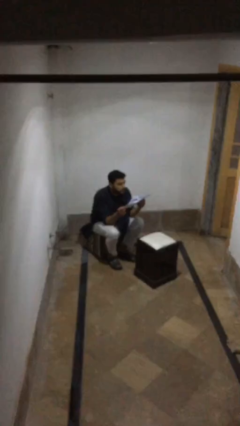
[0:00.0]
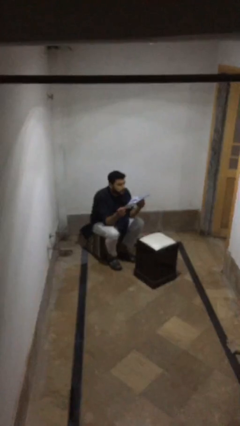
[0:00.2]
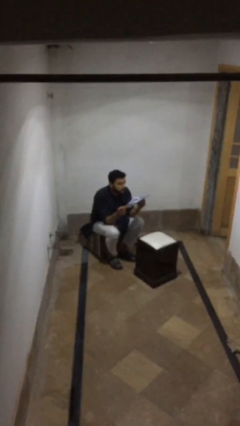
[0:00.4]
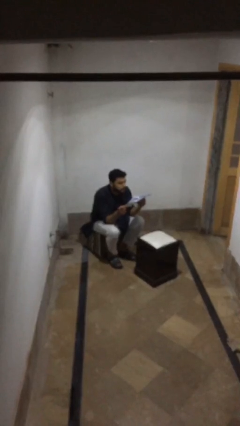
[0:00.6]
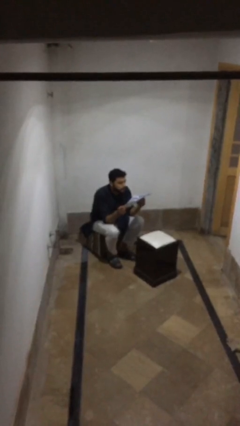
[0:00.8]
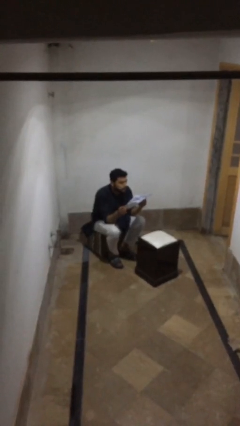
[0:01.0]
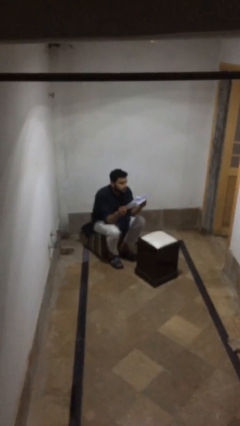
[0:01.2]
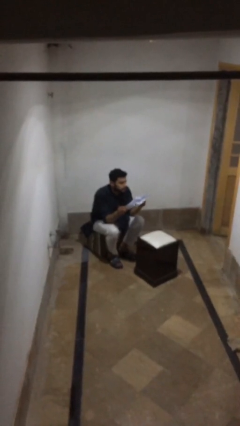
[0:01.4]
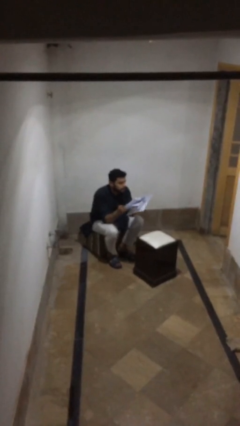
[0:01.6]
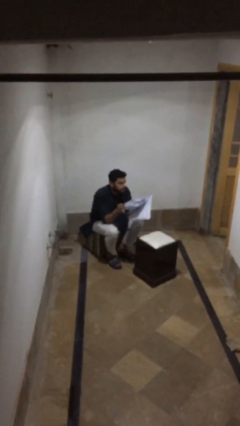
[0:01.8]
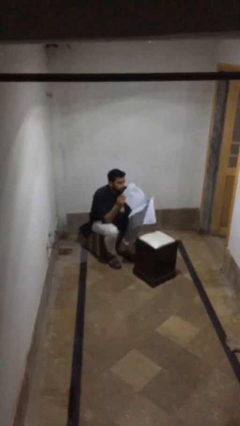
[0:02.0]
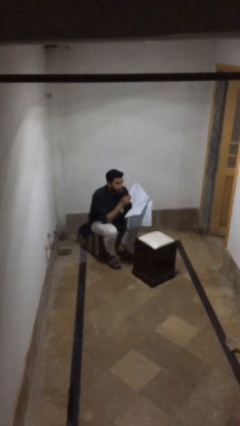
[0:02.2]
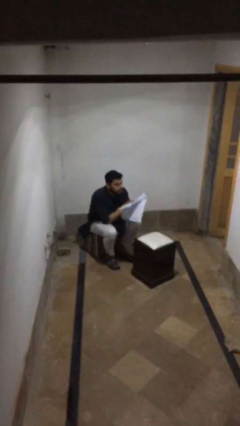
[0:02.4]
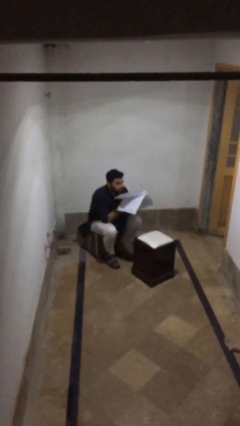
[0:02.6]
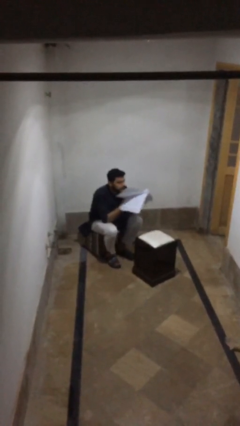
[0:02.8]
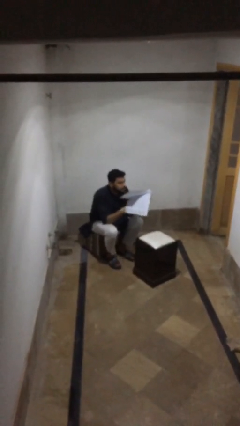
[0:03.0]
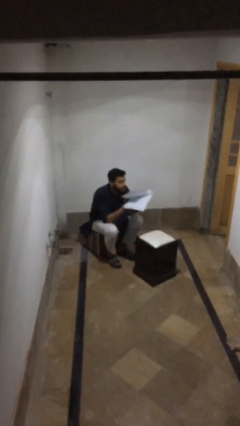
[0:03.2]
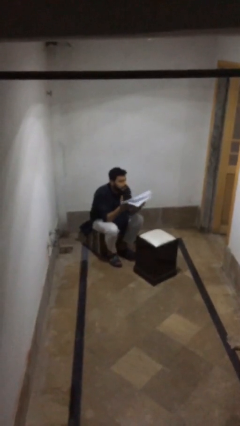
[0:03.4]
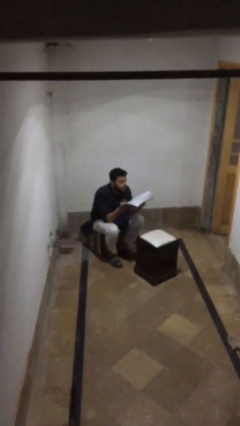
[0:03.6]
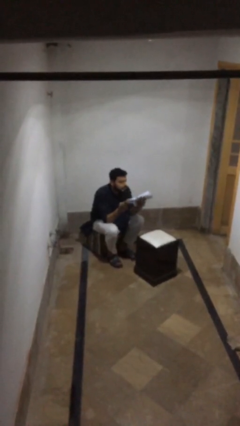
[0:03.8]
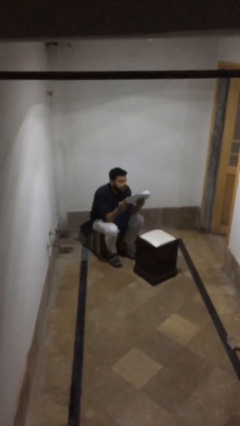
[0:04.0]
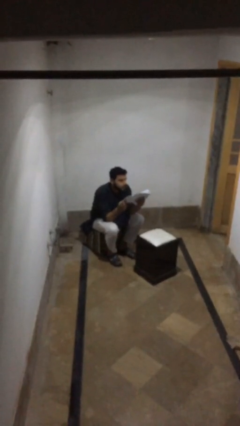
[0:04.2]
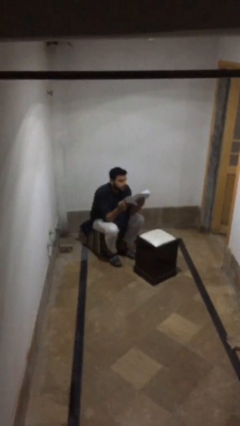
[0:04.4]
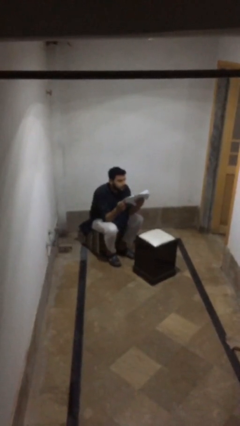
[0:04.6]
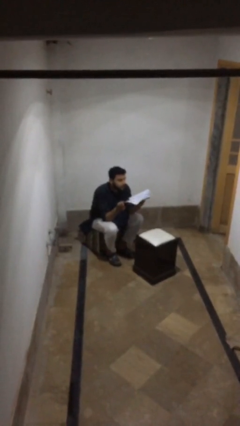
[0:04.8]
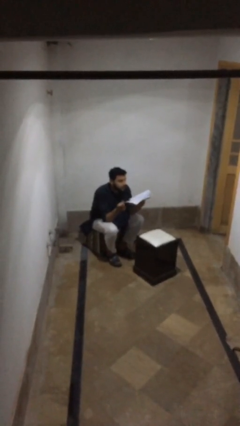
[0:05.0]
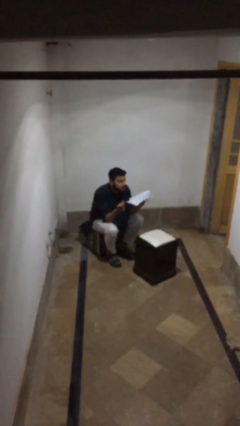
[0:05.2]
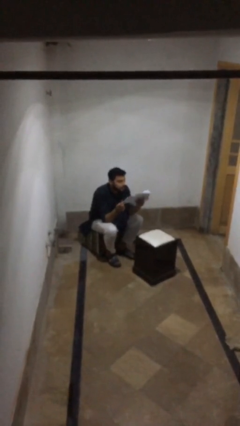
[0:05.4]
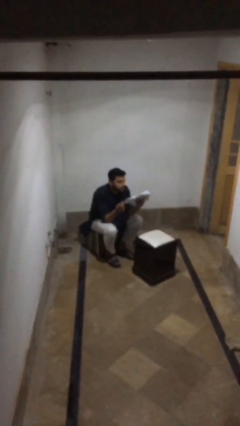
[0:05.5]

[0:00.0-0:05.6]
person reads document

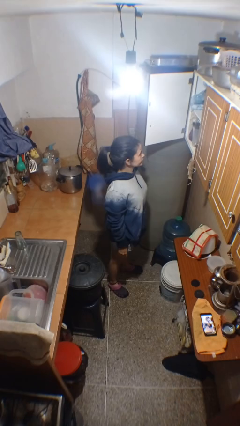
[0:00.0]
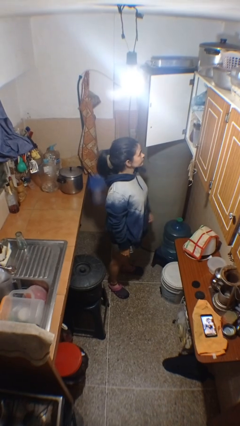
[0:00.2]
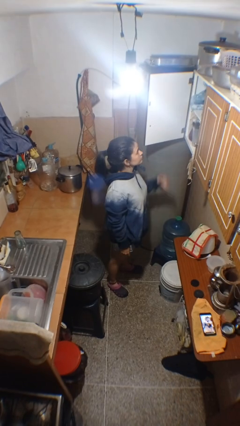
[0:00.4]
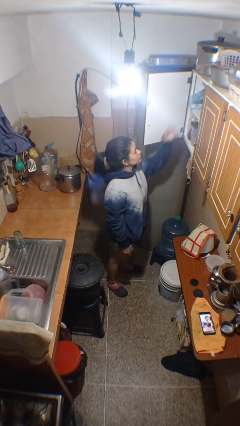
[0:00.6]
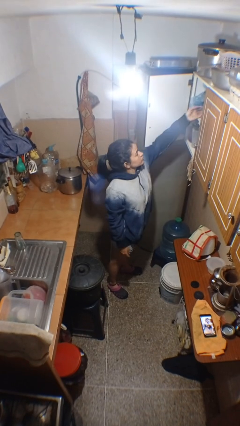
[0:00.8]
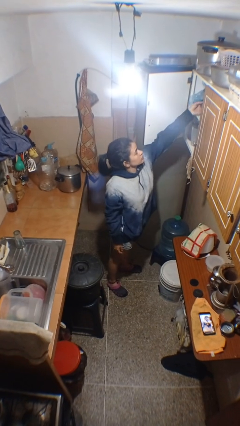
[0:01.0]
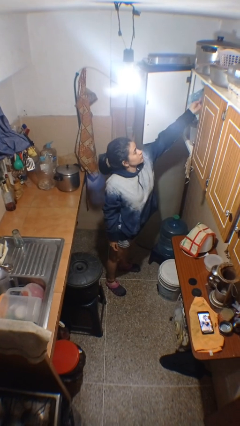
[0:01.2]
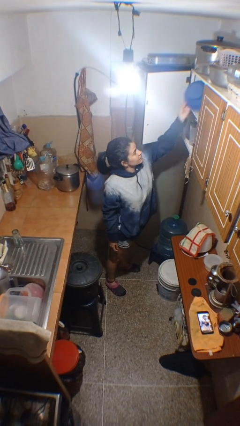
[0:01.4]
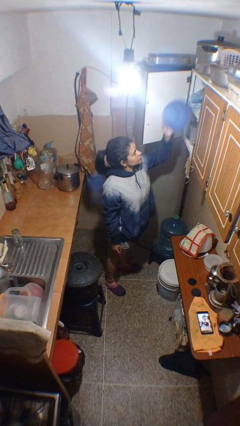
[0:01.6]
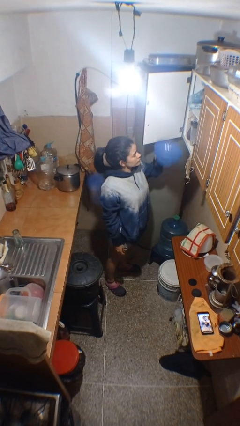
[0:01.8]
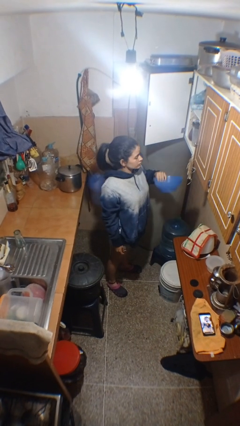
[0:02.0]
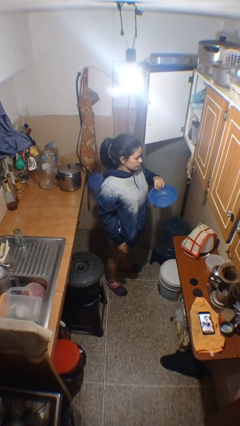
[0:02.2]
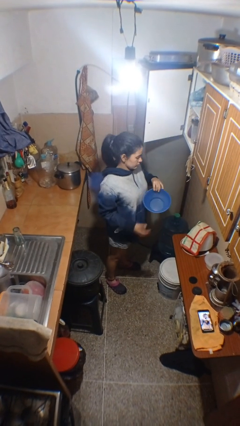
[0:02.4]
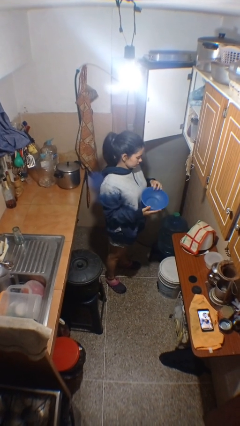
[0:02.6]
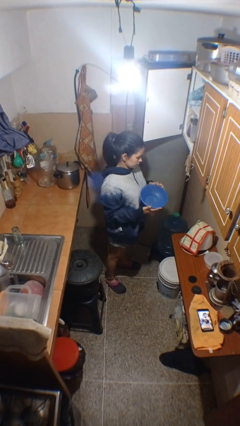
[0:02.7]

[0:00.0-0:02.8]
person picks up object from cabinet

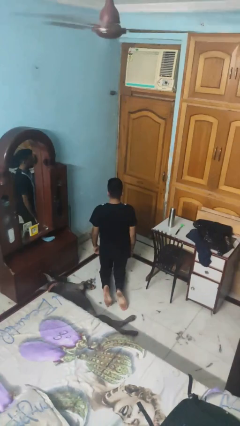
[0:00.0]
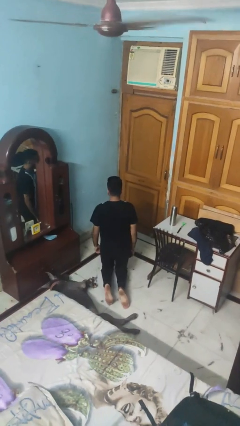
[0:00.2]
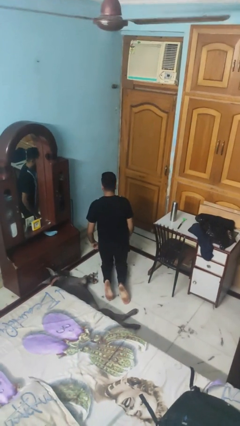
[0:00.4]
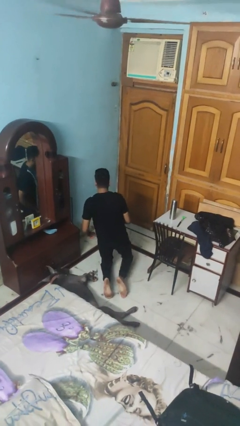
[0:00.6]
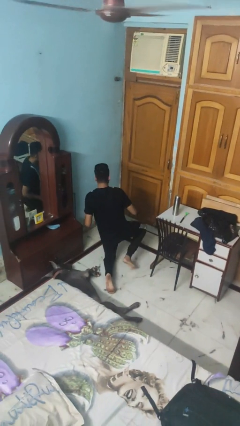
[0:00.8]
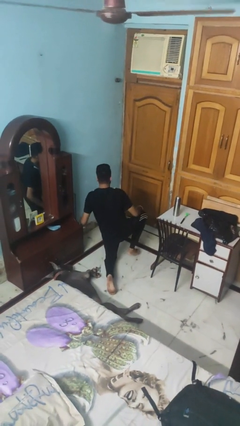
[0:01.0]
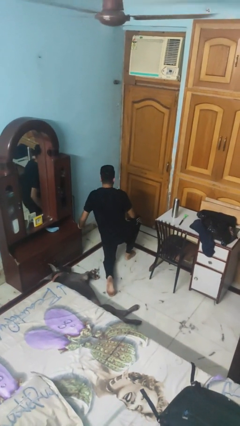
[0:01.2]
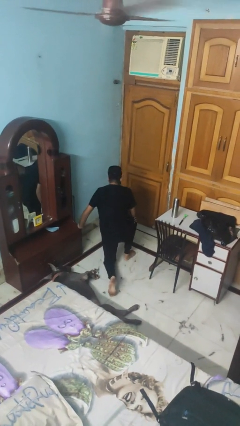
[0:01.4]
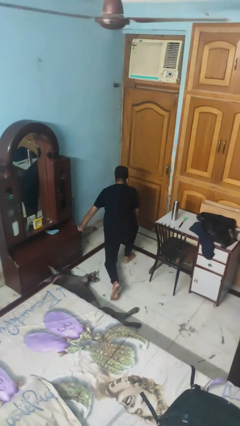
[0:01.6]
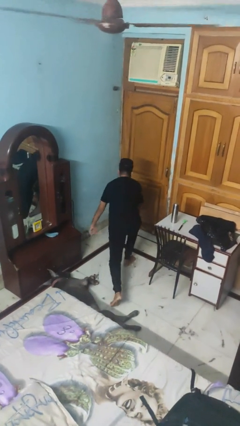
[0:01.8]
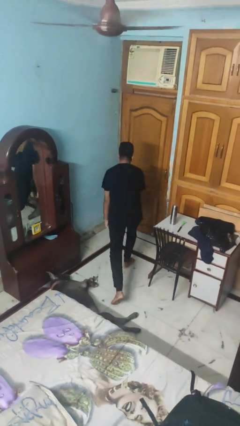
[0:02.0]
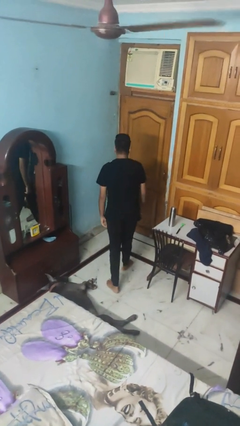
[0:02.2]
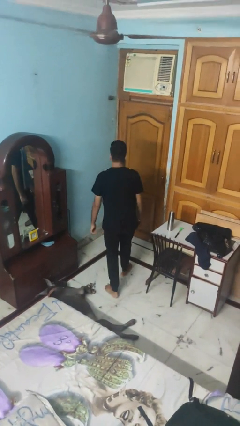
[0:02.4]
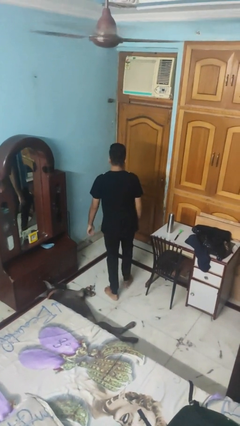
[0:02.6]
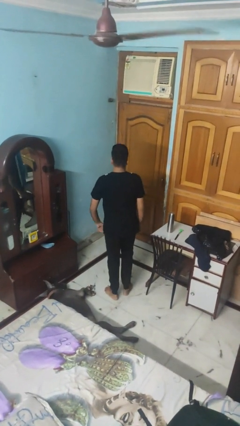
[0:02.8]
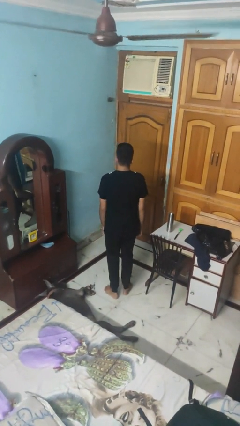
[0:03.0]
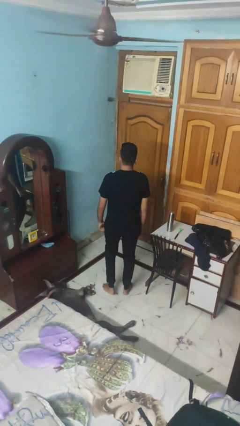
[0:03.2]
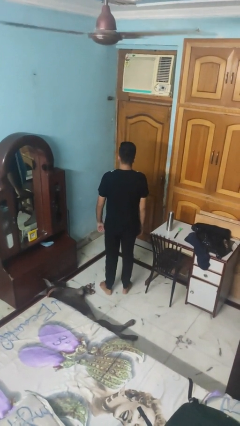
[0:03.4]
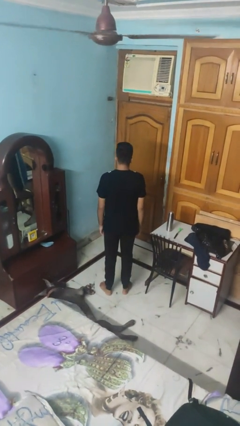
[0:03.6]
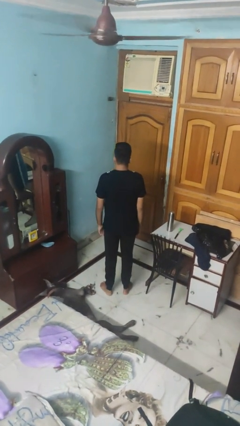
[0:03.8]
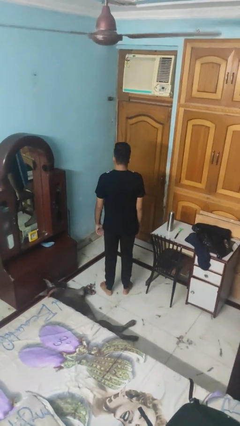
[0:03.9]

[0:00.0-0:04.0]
person stands up from floor

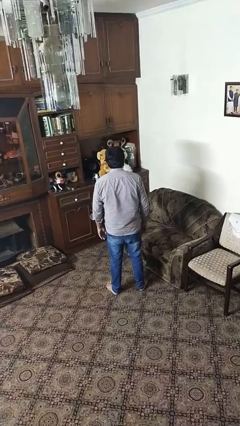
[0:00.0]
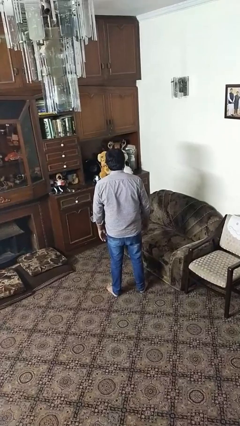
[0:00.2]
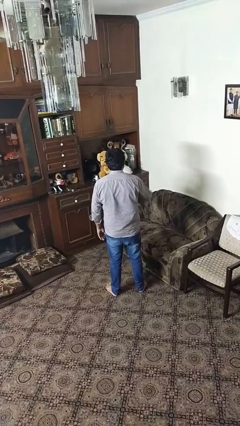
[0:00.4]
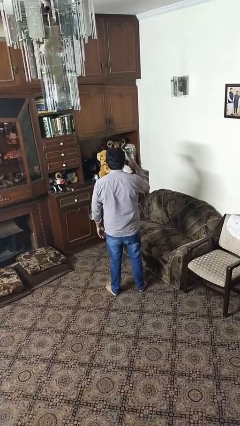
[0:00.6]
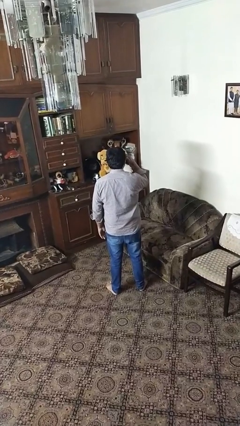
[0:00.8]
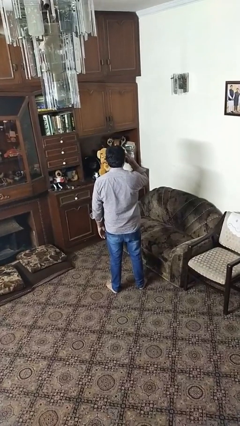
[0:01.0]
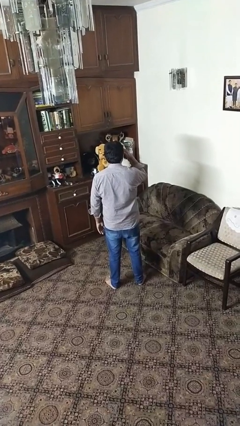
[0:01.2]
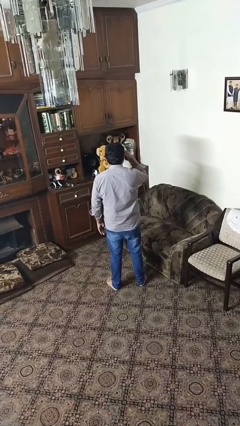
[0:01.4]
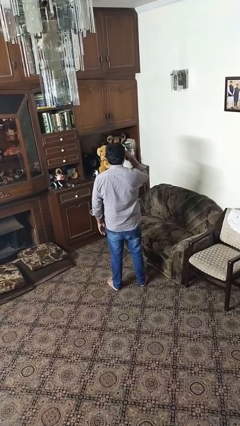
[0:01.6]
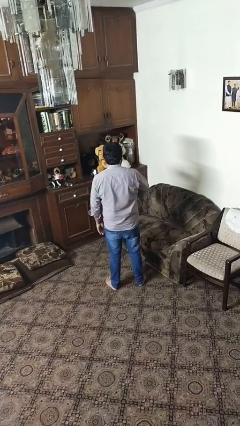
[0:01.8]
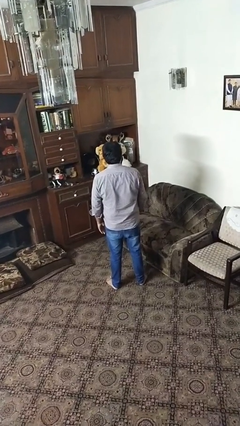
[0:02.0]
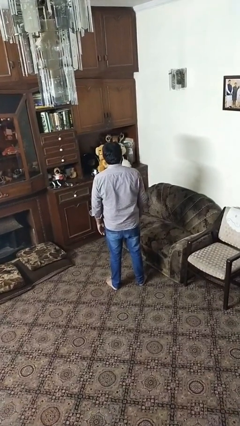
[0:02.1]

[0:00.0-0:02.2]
person salutes

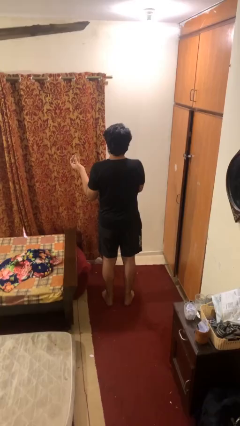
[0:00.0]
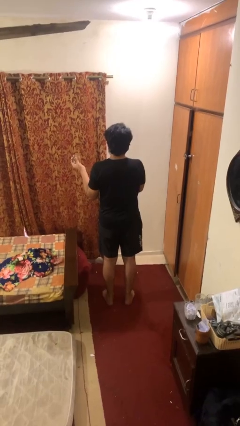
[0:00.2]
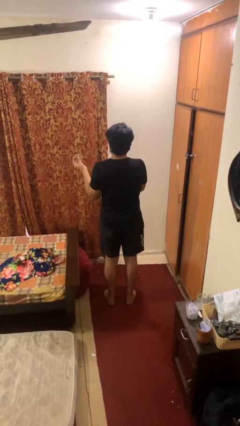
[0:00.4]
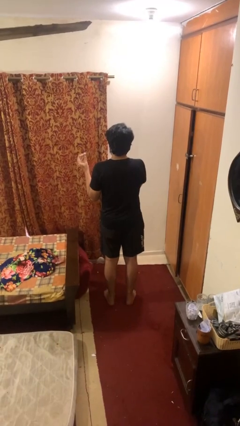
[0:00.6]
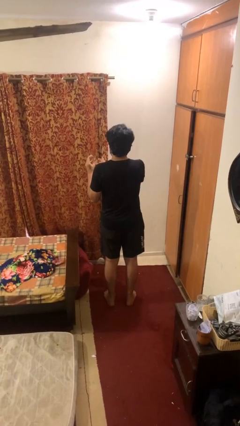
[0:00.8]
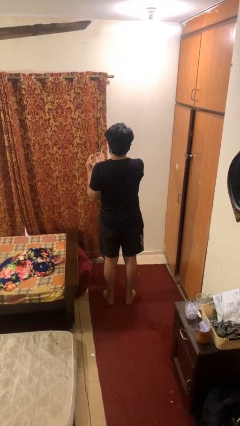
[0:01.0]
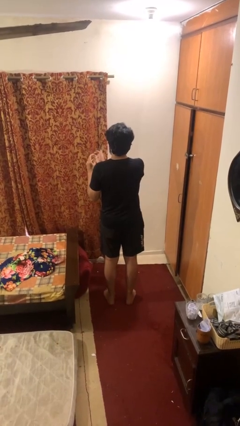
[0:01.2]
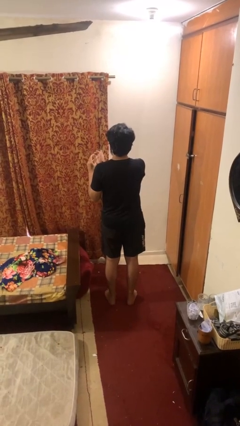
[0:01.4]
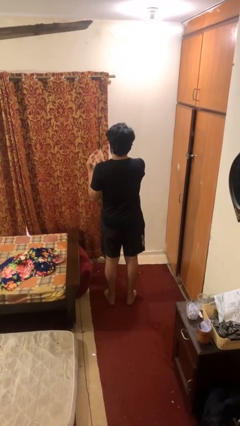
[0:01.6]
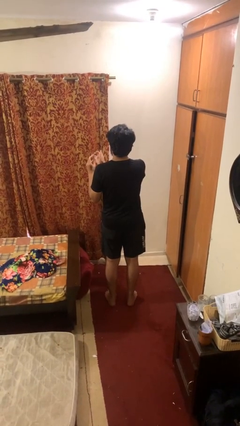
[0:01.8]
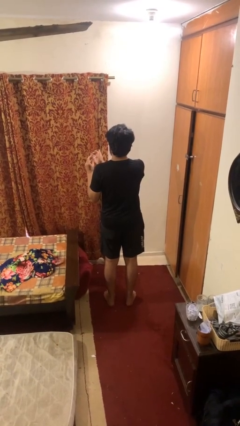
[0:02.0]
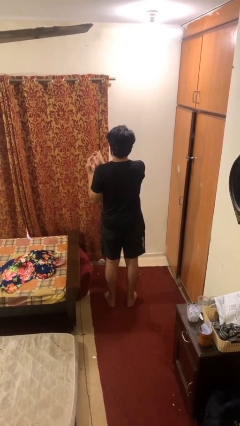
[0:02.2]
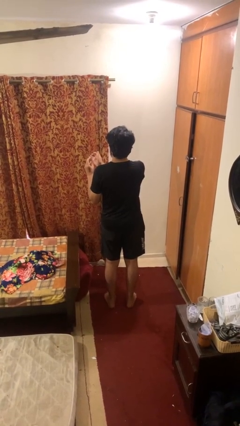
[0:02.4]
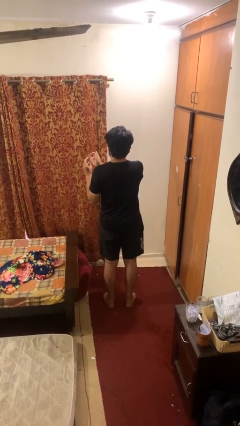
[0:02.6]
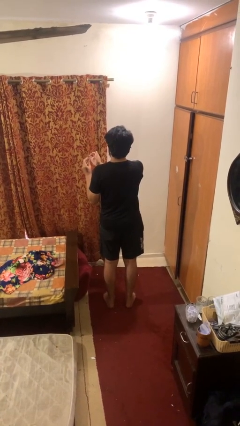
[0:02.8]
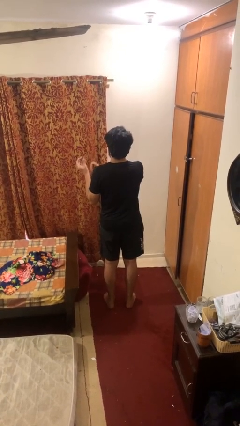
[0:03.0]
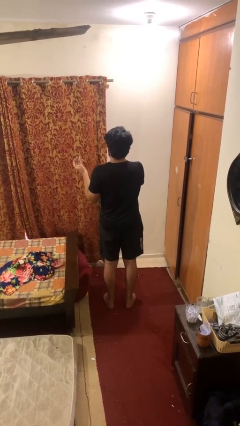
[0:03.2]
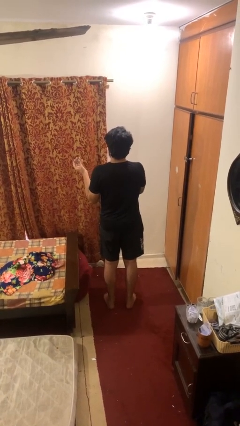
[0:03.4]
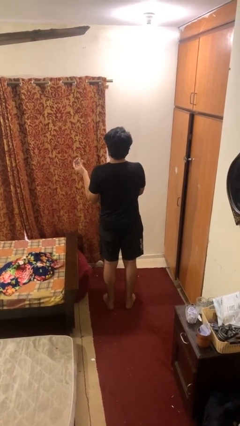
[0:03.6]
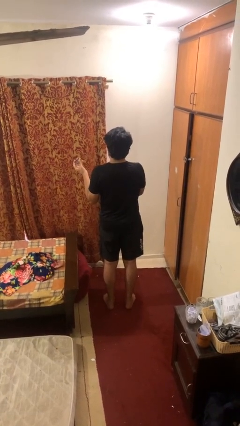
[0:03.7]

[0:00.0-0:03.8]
person clips fingernails
